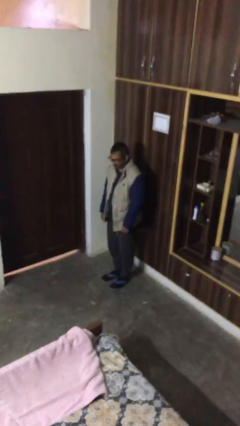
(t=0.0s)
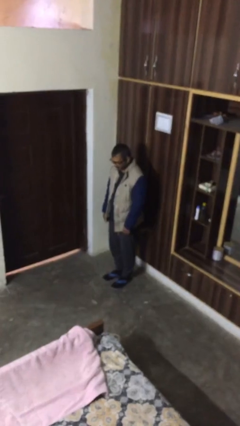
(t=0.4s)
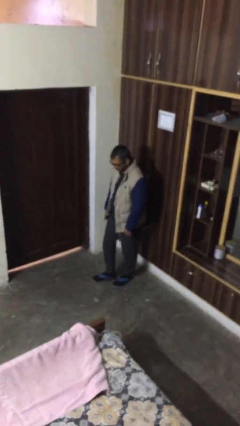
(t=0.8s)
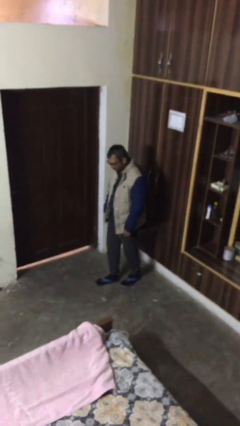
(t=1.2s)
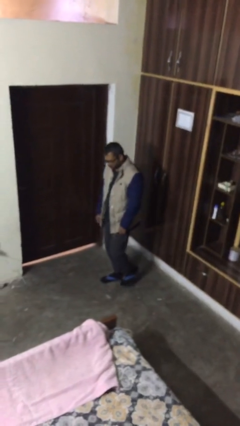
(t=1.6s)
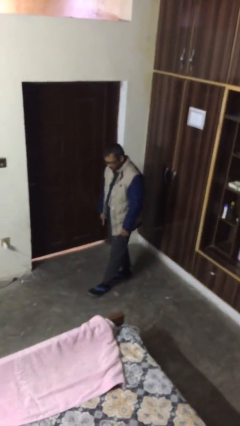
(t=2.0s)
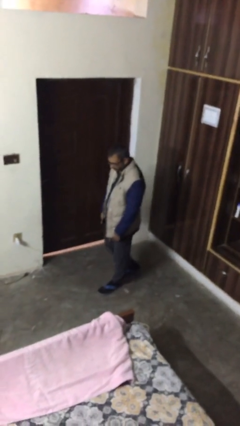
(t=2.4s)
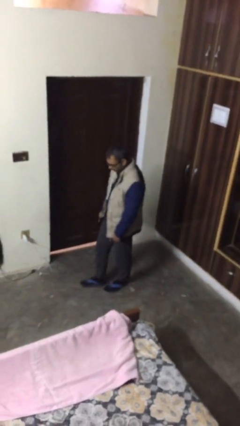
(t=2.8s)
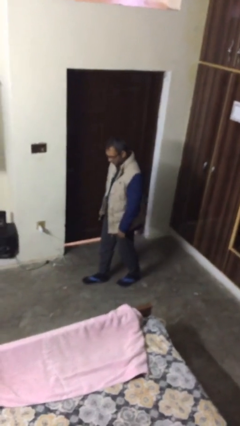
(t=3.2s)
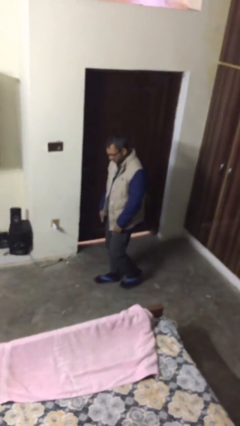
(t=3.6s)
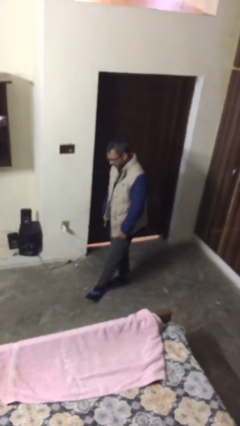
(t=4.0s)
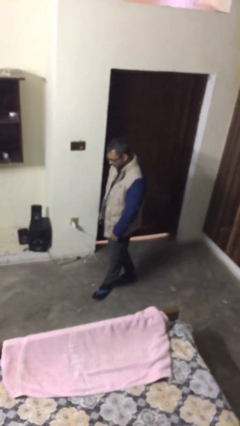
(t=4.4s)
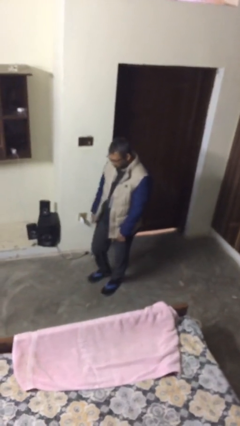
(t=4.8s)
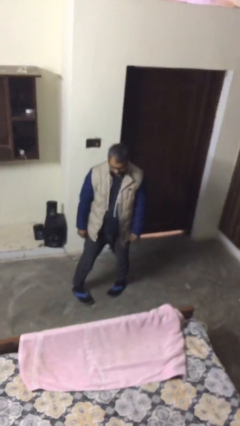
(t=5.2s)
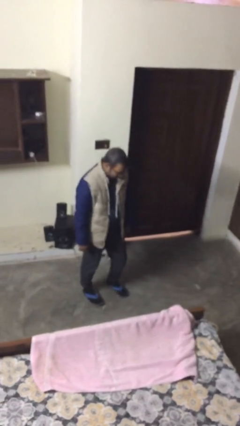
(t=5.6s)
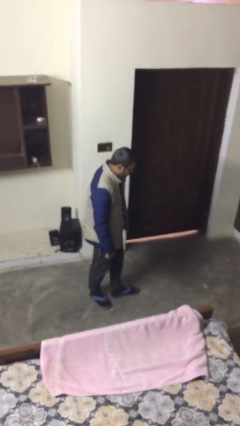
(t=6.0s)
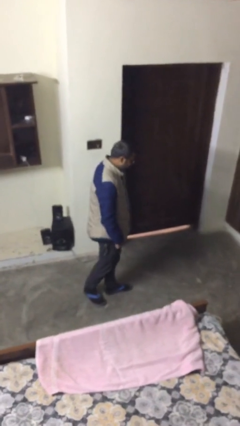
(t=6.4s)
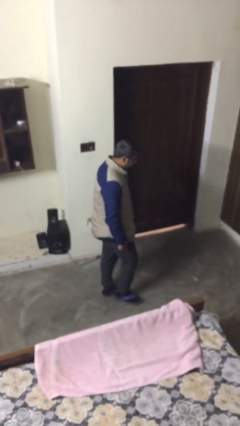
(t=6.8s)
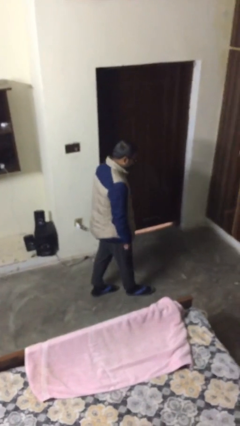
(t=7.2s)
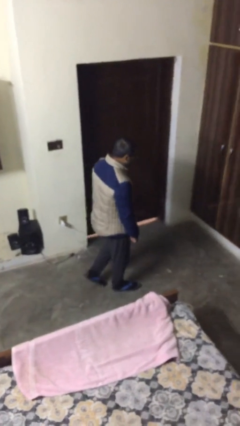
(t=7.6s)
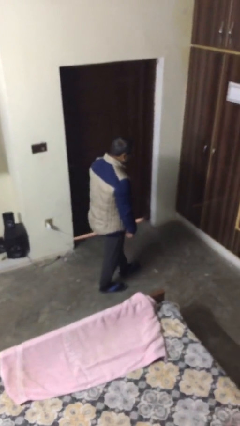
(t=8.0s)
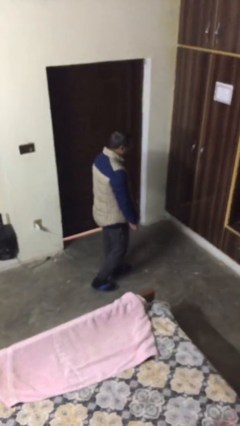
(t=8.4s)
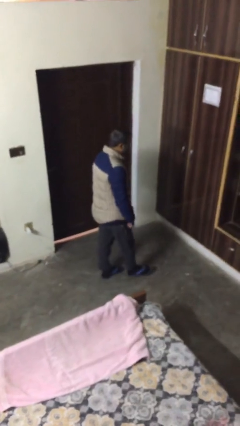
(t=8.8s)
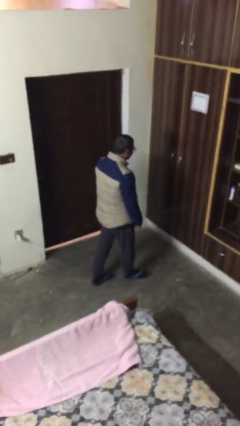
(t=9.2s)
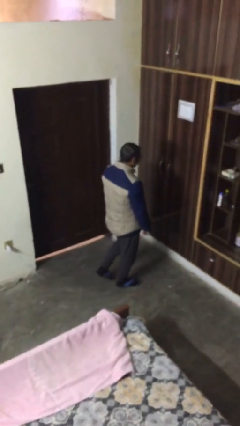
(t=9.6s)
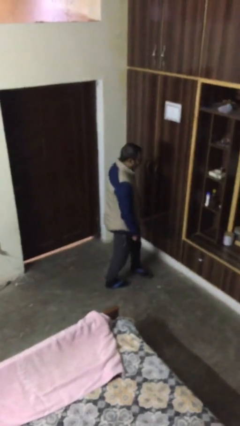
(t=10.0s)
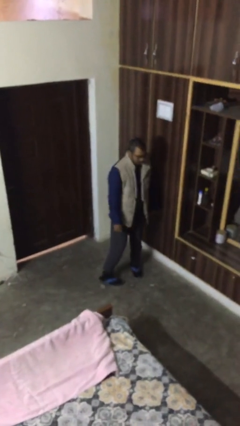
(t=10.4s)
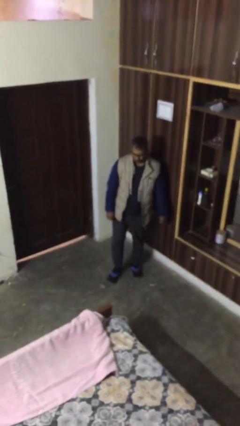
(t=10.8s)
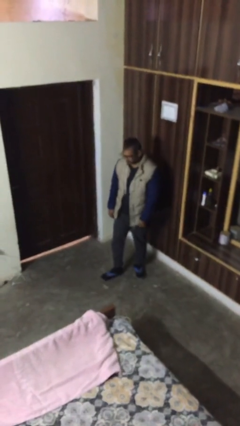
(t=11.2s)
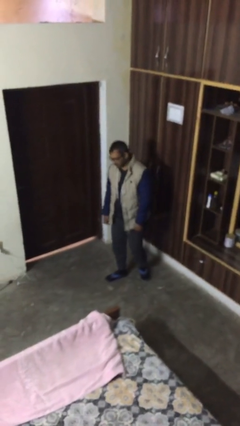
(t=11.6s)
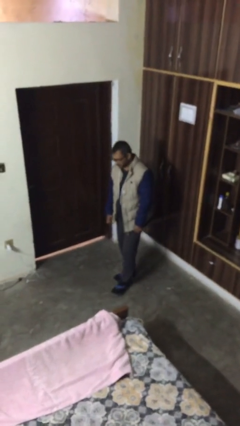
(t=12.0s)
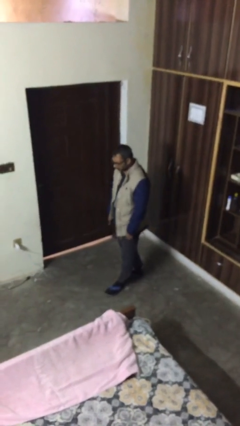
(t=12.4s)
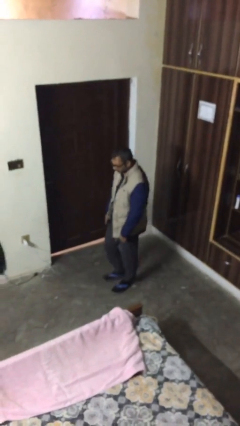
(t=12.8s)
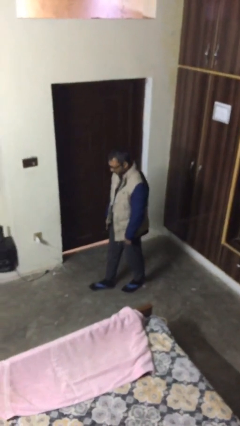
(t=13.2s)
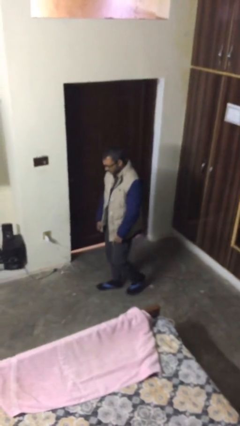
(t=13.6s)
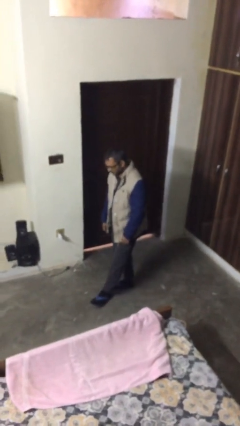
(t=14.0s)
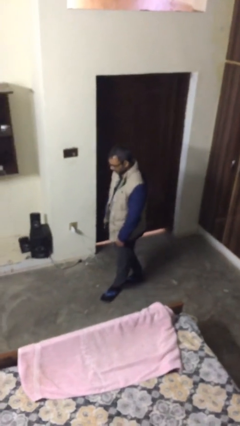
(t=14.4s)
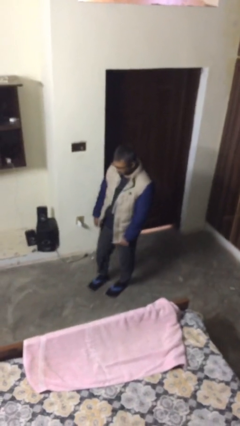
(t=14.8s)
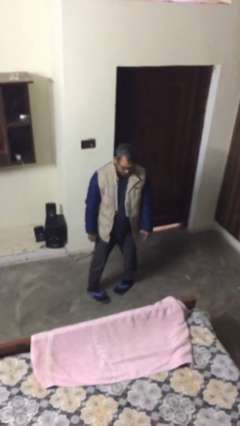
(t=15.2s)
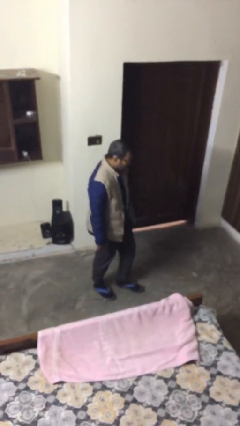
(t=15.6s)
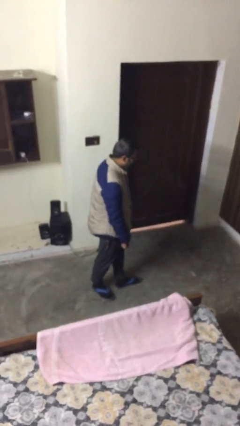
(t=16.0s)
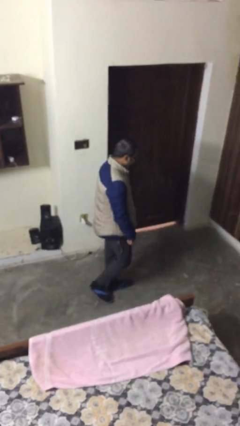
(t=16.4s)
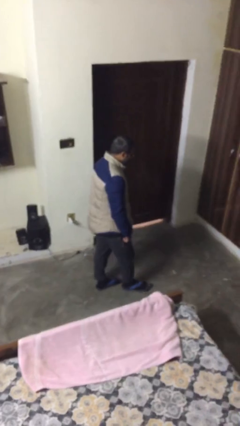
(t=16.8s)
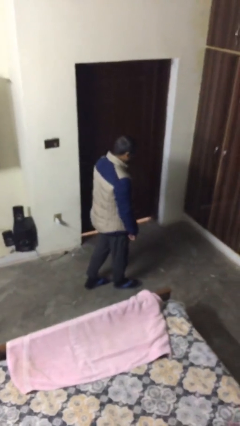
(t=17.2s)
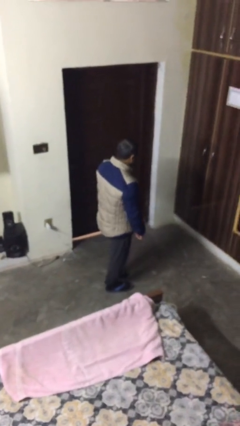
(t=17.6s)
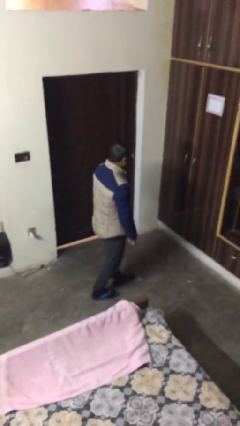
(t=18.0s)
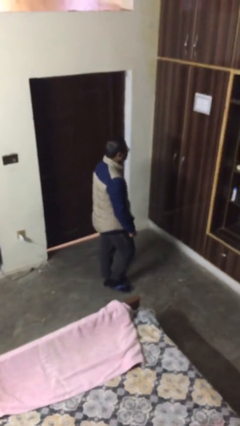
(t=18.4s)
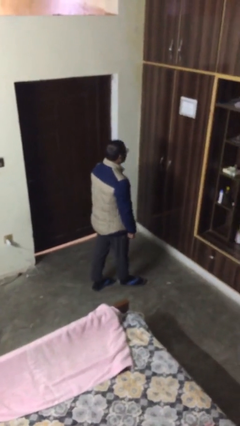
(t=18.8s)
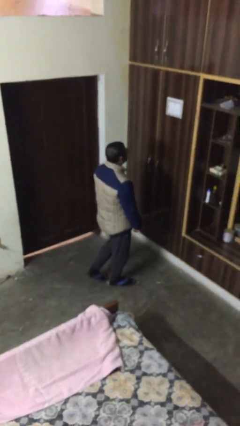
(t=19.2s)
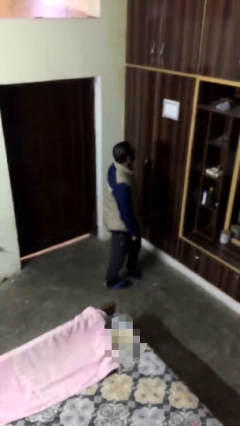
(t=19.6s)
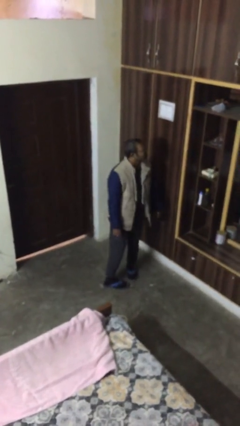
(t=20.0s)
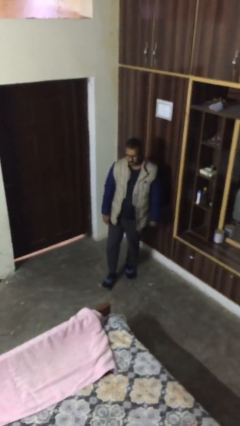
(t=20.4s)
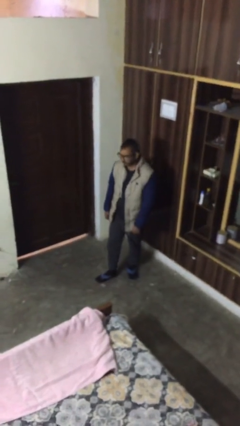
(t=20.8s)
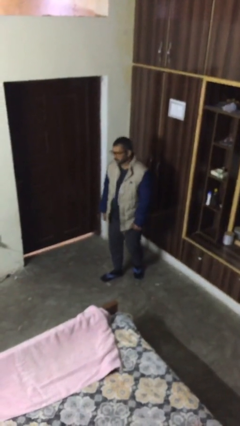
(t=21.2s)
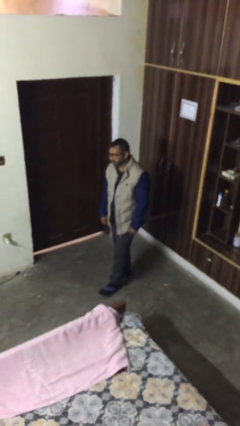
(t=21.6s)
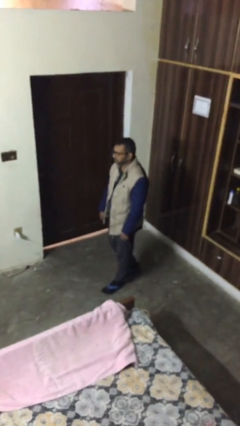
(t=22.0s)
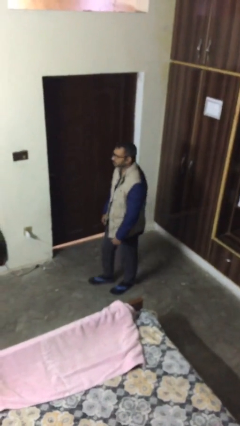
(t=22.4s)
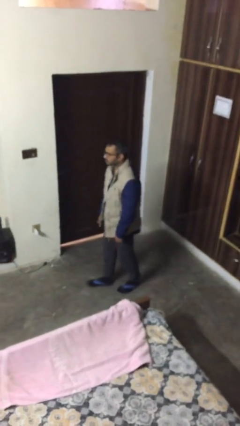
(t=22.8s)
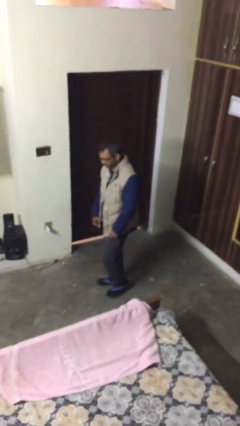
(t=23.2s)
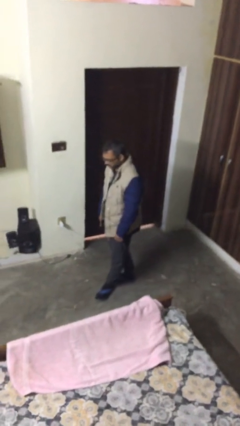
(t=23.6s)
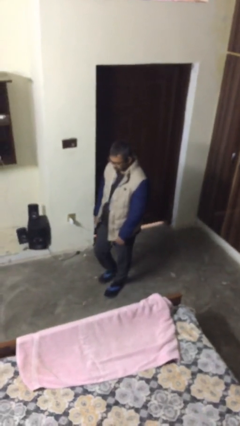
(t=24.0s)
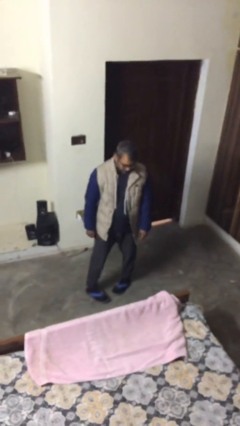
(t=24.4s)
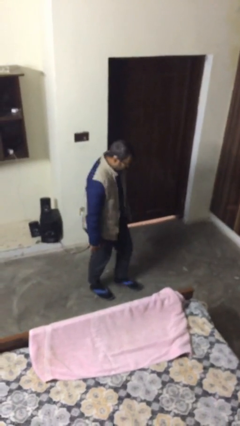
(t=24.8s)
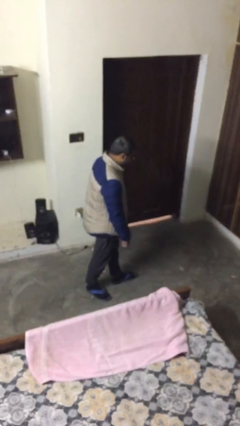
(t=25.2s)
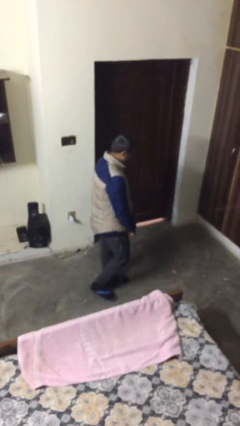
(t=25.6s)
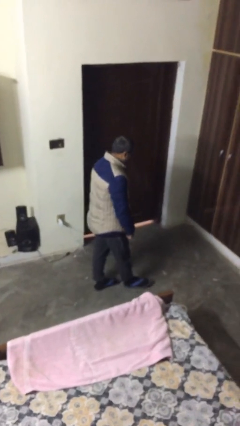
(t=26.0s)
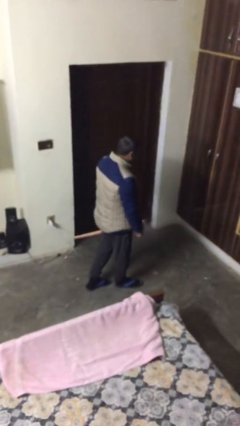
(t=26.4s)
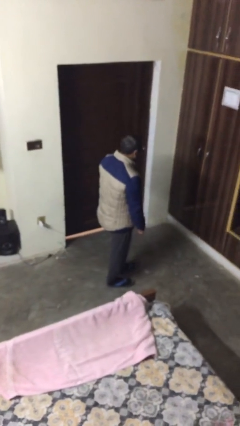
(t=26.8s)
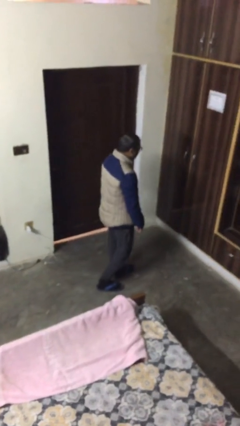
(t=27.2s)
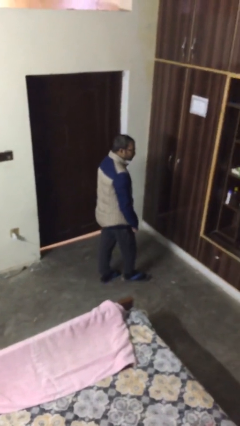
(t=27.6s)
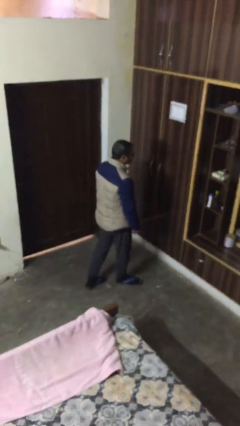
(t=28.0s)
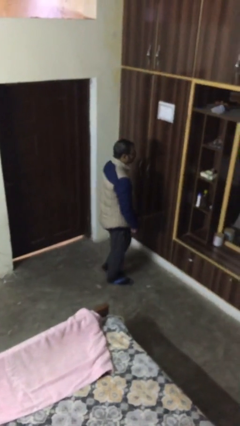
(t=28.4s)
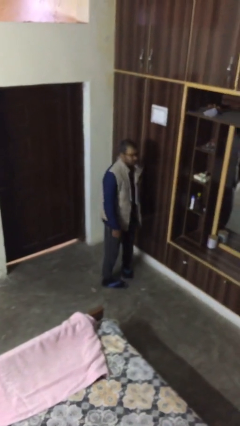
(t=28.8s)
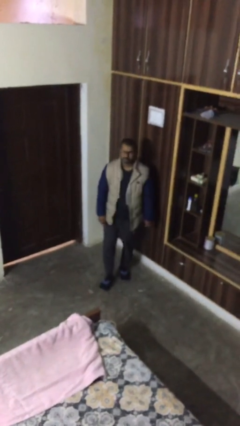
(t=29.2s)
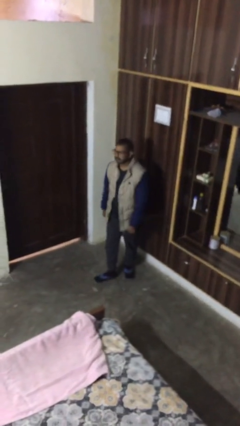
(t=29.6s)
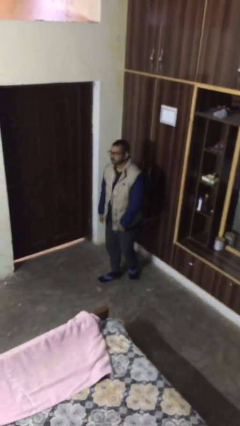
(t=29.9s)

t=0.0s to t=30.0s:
person walks

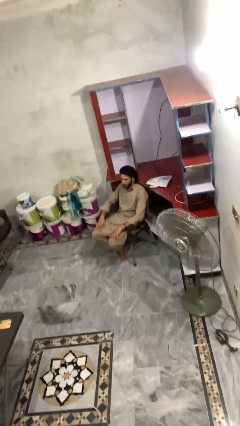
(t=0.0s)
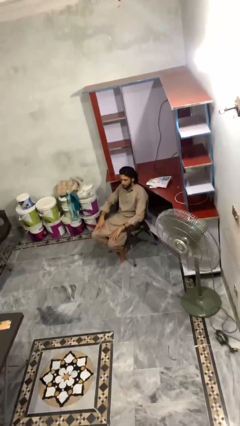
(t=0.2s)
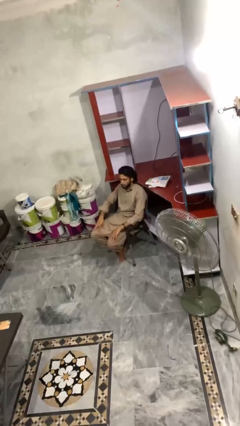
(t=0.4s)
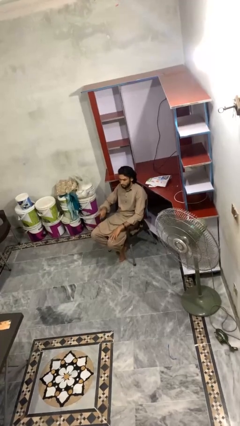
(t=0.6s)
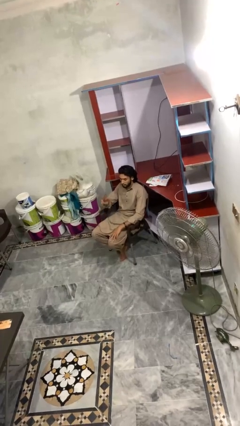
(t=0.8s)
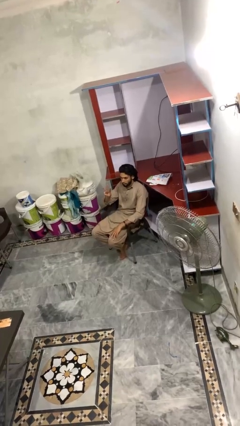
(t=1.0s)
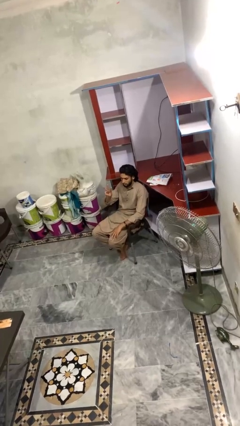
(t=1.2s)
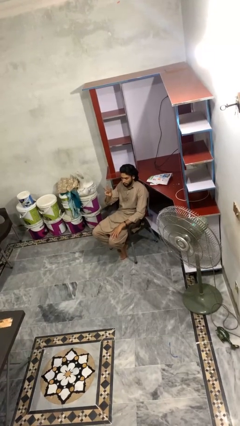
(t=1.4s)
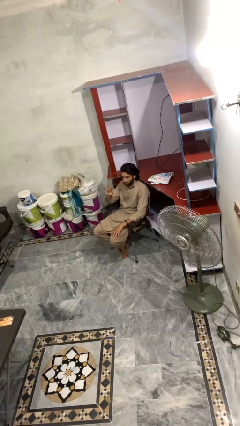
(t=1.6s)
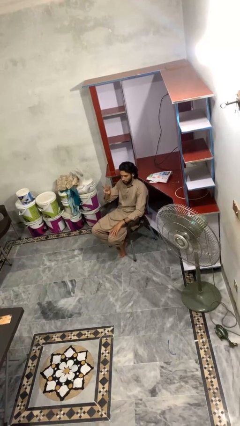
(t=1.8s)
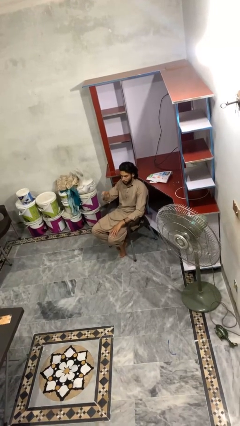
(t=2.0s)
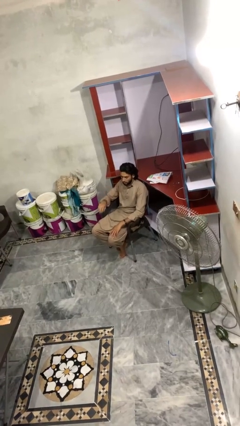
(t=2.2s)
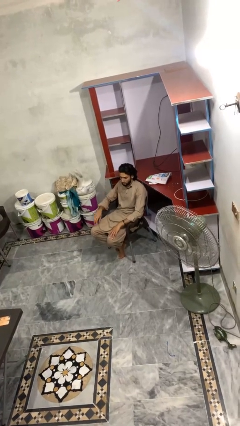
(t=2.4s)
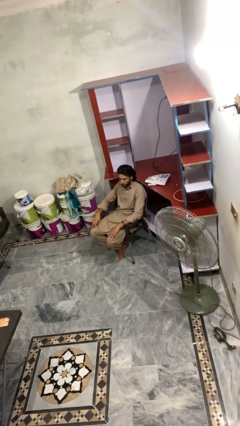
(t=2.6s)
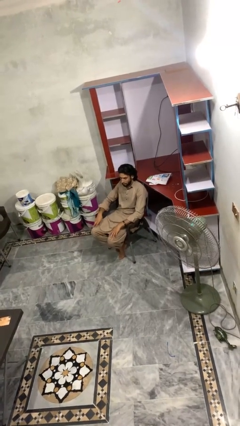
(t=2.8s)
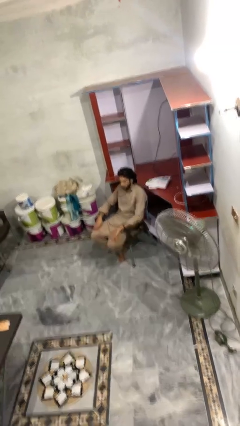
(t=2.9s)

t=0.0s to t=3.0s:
person gestures number three
